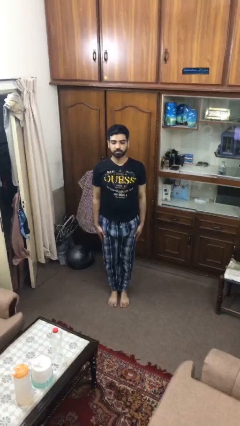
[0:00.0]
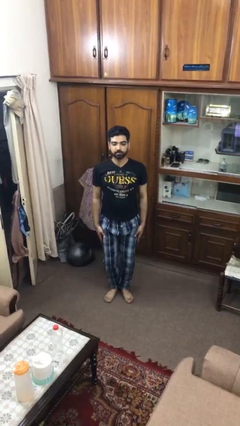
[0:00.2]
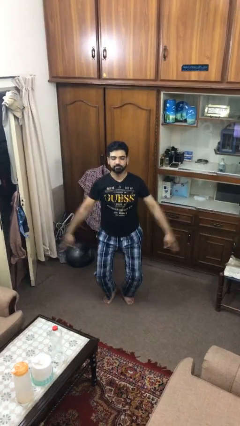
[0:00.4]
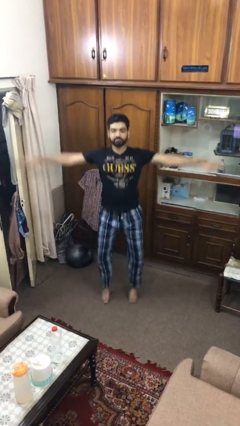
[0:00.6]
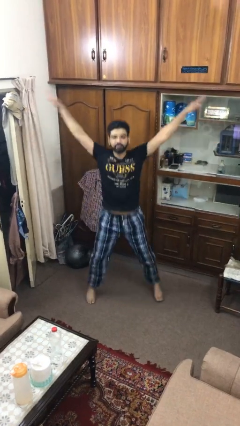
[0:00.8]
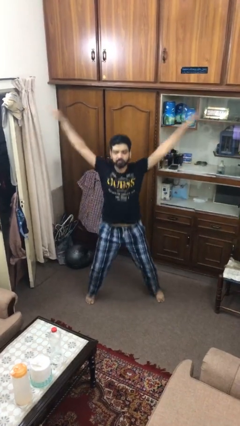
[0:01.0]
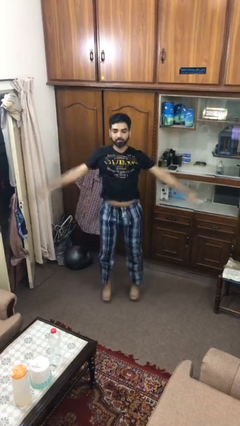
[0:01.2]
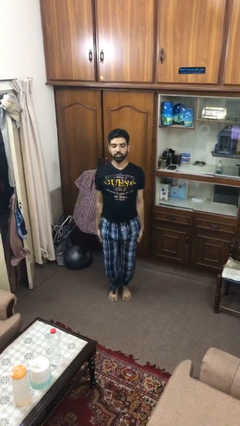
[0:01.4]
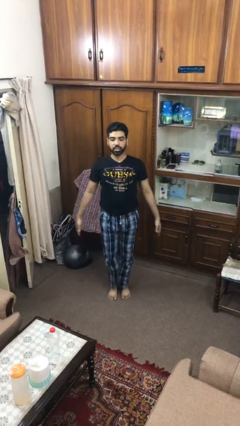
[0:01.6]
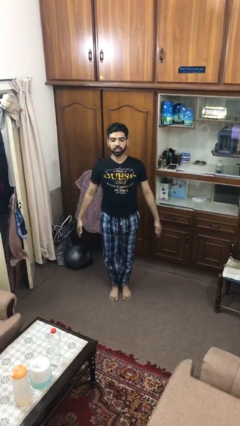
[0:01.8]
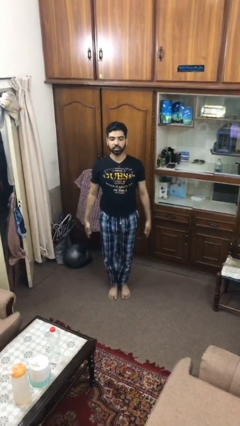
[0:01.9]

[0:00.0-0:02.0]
person exercises with jumping jacks

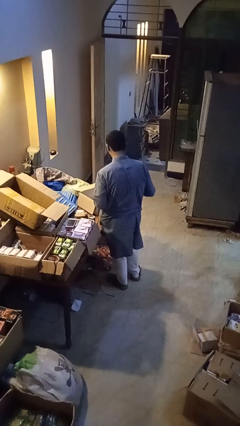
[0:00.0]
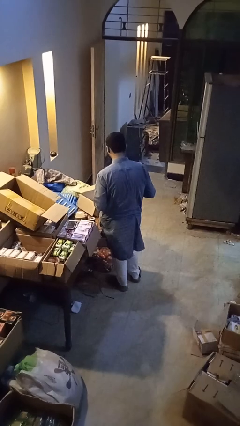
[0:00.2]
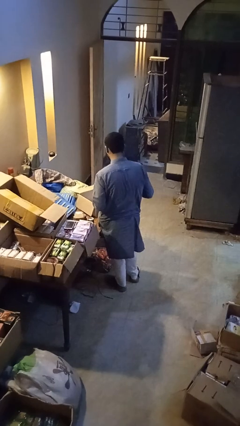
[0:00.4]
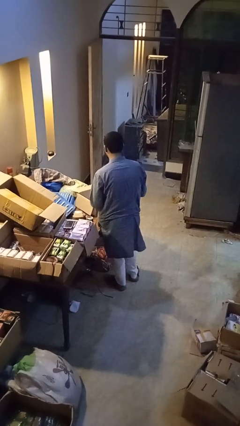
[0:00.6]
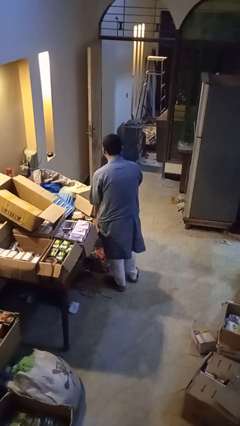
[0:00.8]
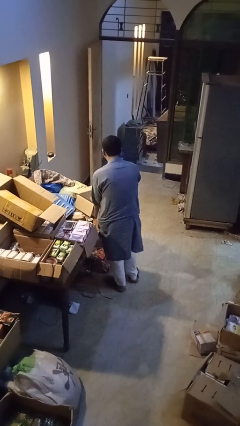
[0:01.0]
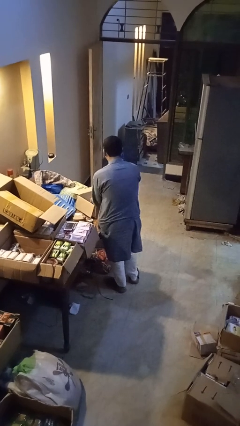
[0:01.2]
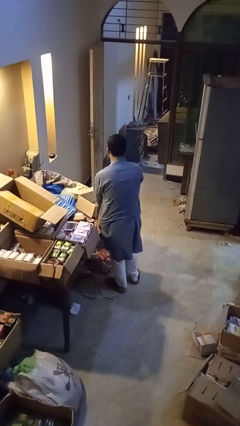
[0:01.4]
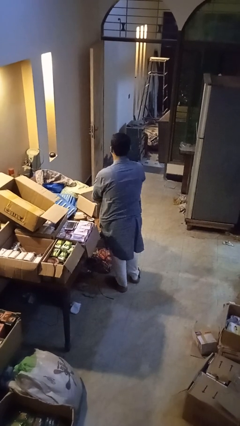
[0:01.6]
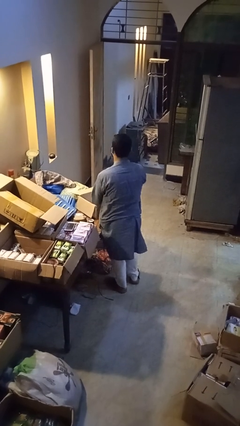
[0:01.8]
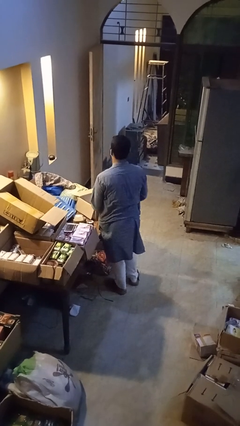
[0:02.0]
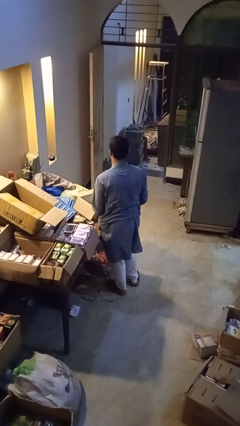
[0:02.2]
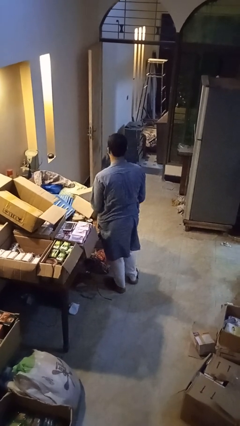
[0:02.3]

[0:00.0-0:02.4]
person puts object into box

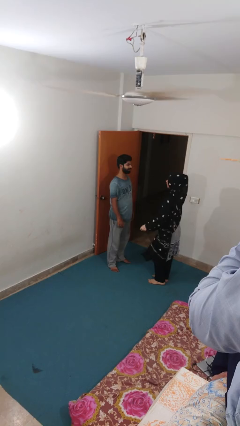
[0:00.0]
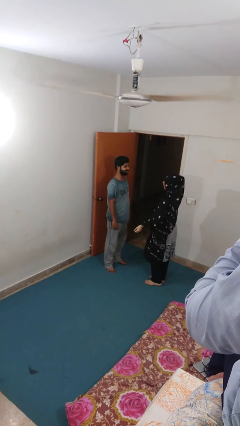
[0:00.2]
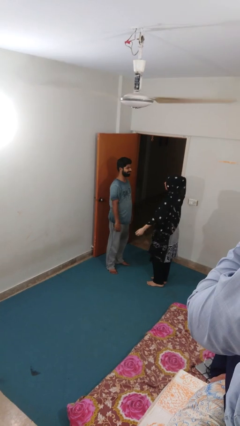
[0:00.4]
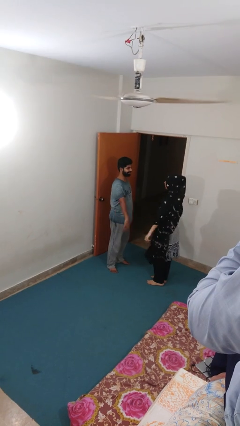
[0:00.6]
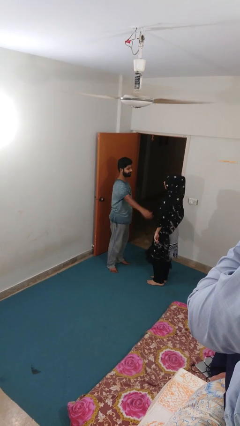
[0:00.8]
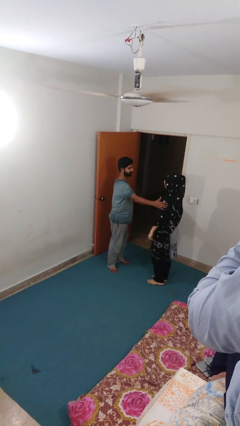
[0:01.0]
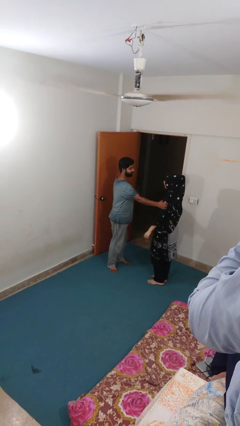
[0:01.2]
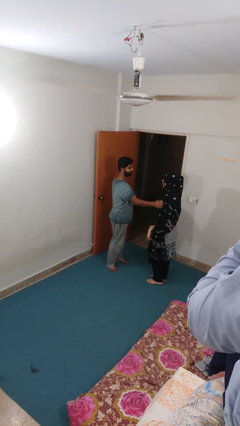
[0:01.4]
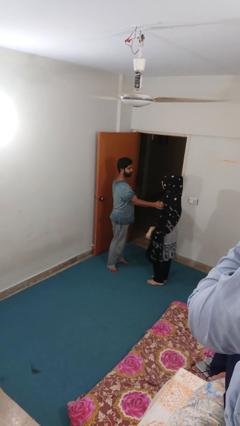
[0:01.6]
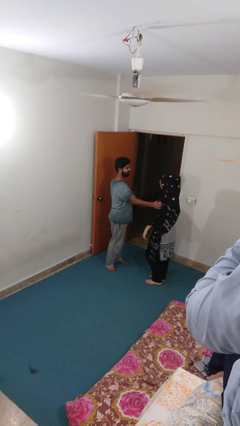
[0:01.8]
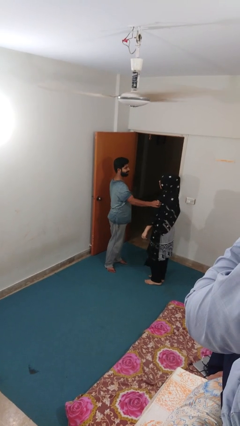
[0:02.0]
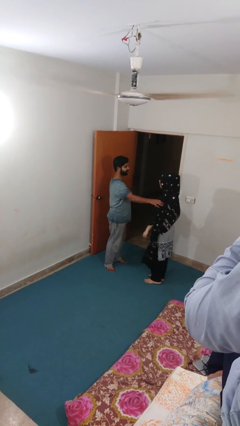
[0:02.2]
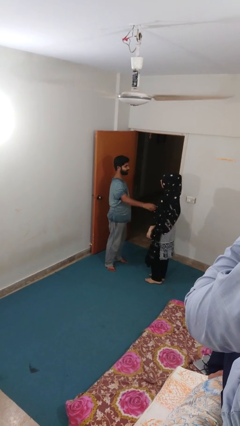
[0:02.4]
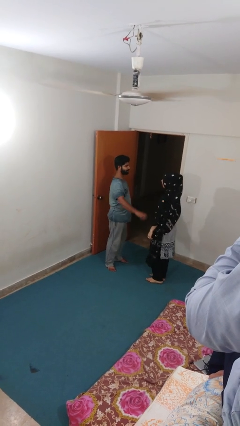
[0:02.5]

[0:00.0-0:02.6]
person grabs person by bicep

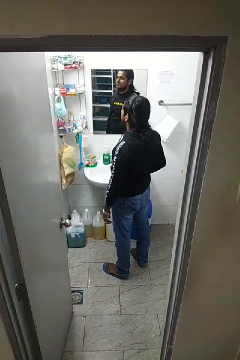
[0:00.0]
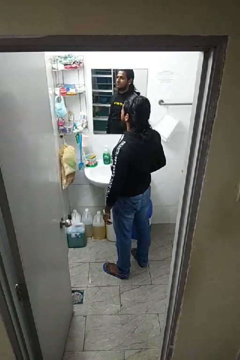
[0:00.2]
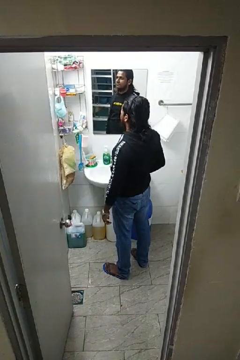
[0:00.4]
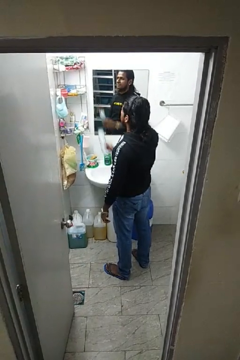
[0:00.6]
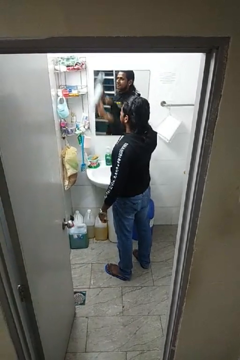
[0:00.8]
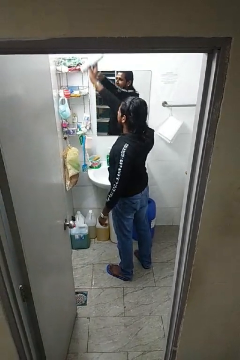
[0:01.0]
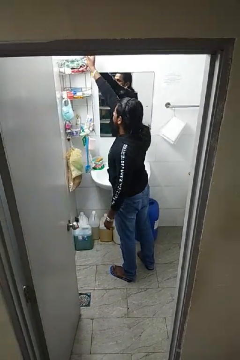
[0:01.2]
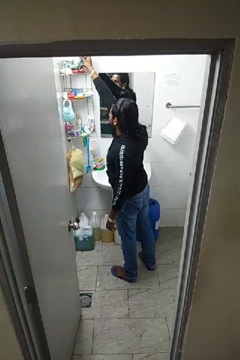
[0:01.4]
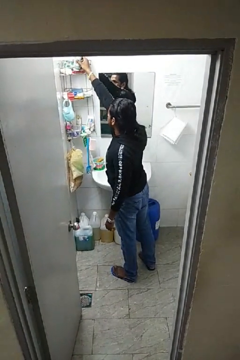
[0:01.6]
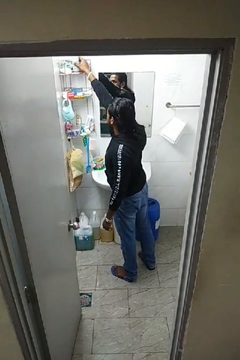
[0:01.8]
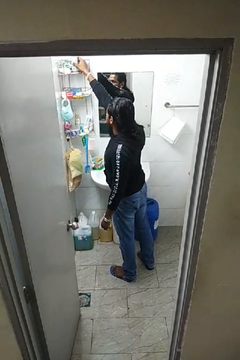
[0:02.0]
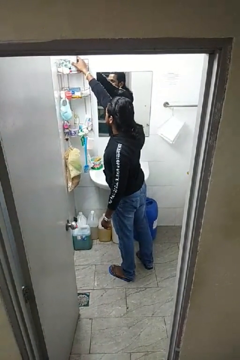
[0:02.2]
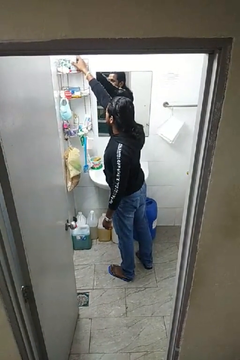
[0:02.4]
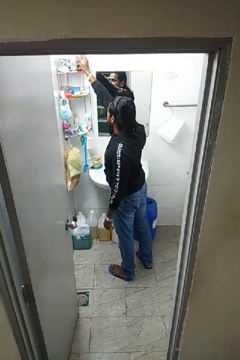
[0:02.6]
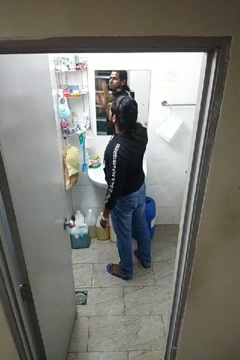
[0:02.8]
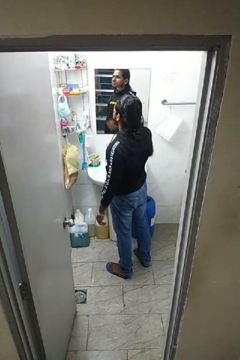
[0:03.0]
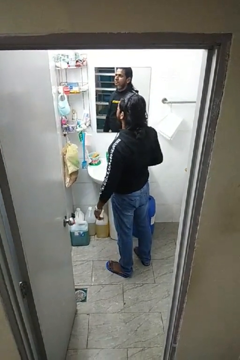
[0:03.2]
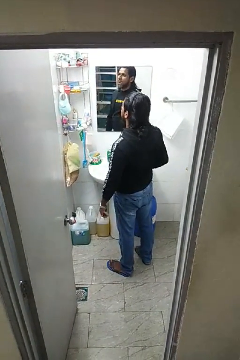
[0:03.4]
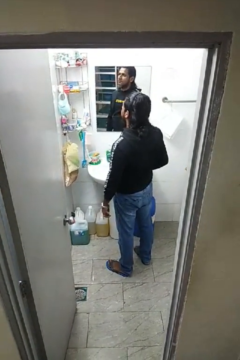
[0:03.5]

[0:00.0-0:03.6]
person puts down object on countertop

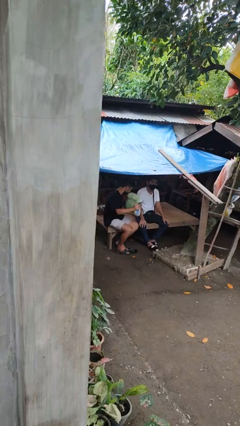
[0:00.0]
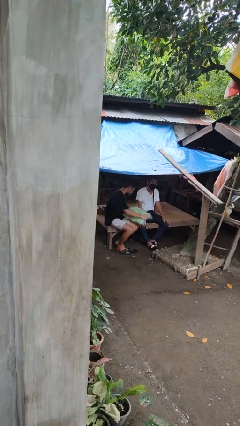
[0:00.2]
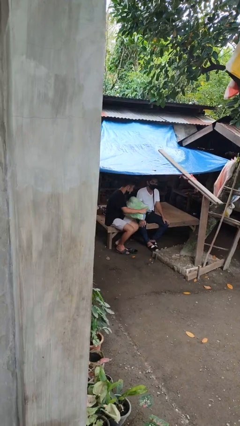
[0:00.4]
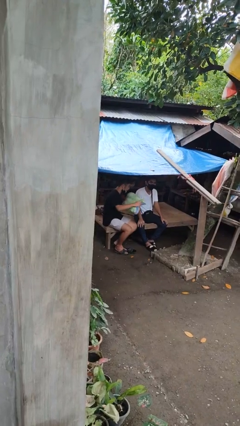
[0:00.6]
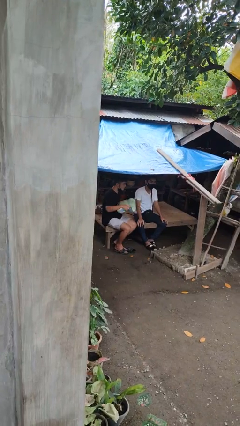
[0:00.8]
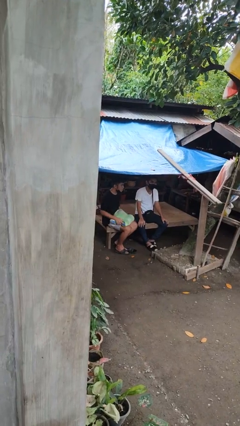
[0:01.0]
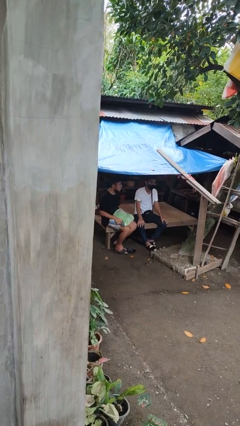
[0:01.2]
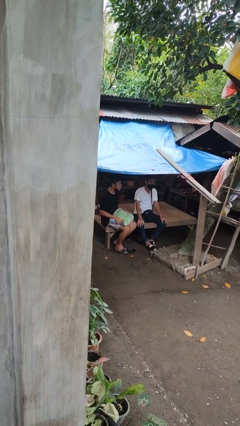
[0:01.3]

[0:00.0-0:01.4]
person hits person with pillow

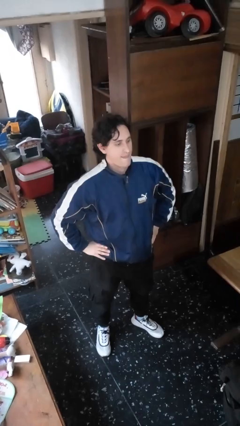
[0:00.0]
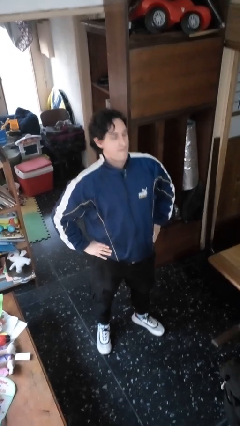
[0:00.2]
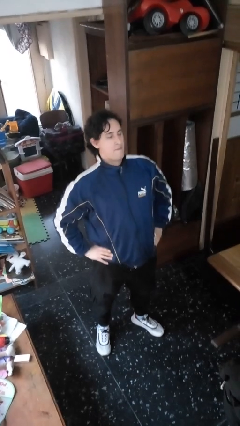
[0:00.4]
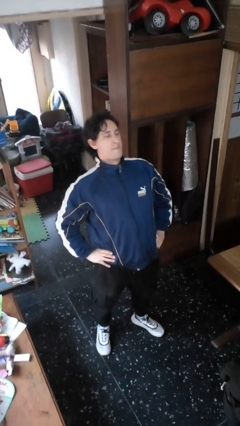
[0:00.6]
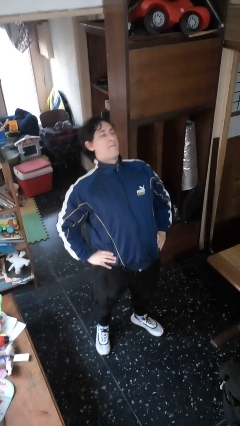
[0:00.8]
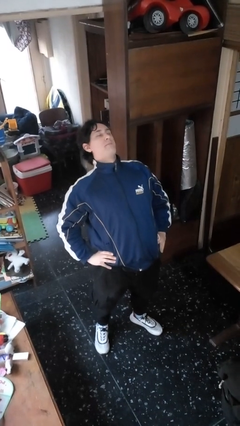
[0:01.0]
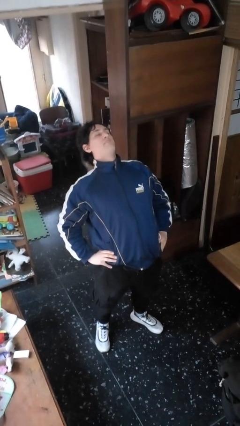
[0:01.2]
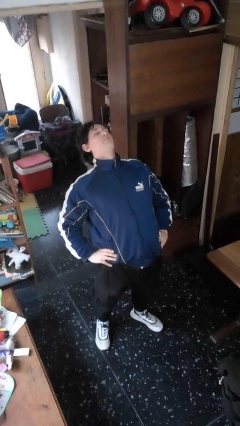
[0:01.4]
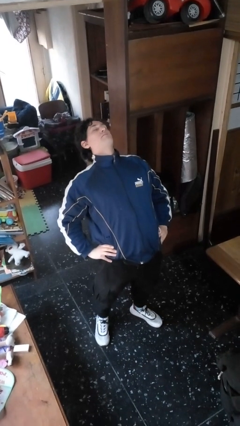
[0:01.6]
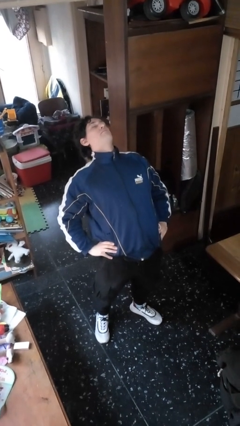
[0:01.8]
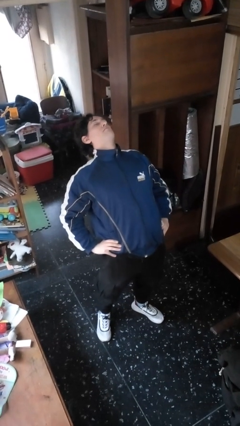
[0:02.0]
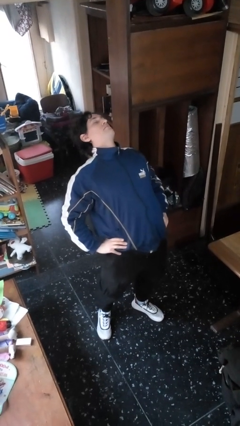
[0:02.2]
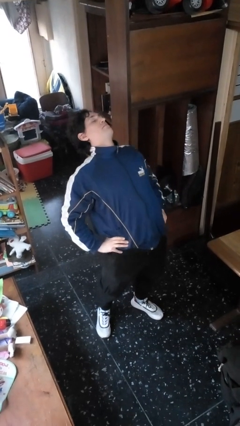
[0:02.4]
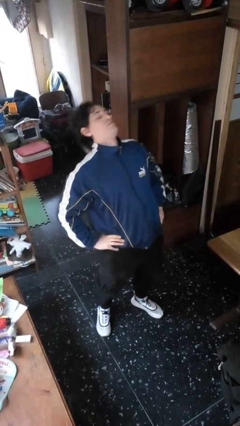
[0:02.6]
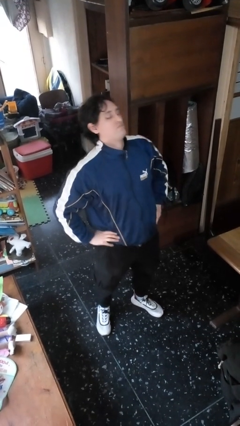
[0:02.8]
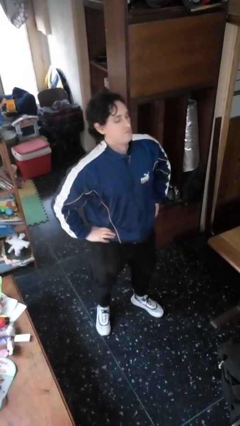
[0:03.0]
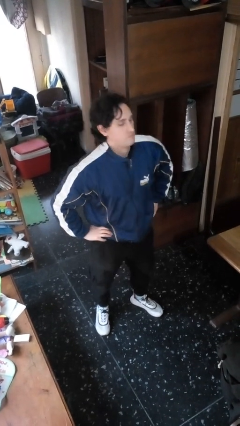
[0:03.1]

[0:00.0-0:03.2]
person stretches back

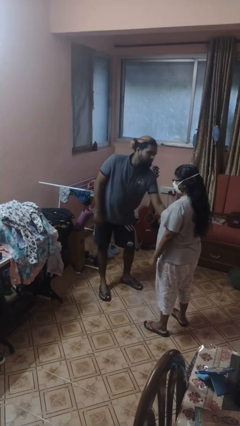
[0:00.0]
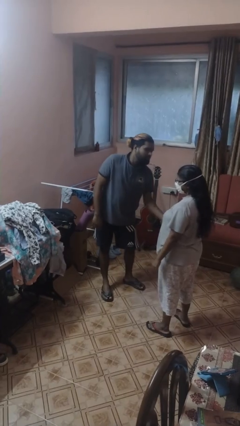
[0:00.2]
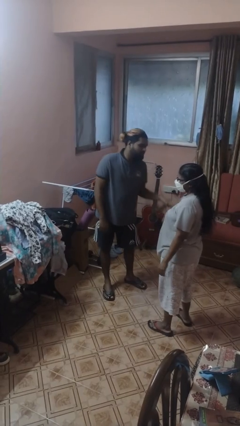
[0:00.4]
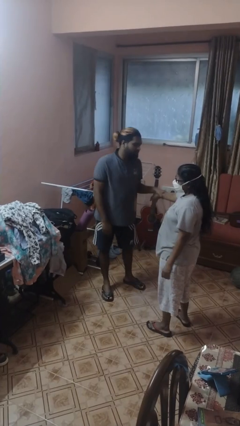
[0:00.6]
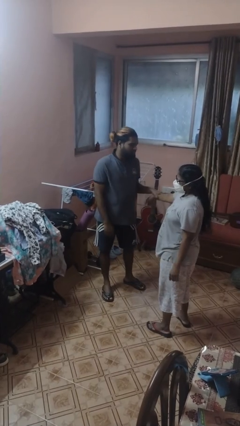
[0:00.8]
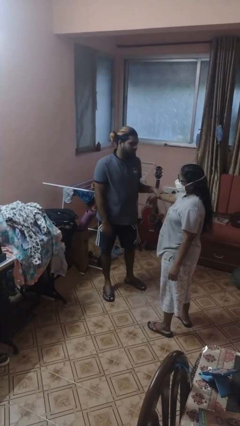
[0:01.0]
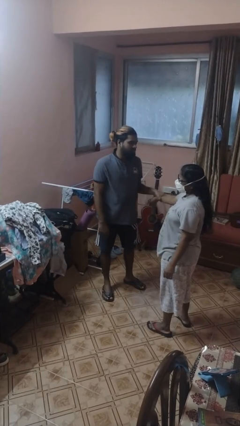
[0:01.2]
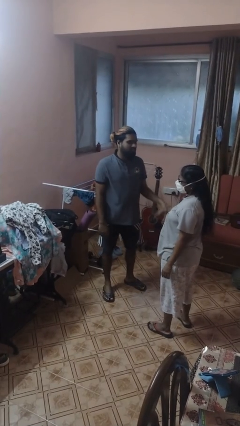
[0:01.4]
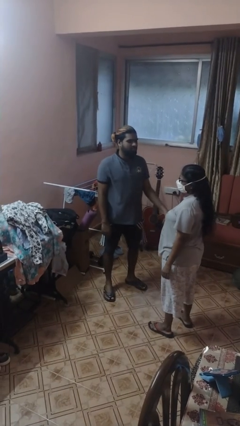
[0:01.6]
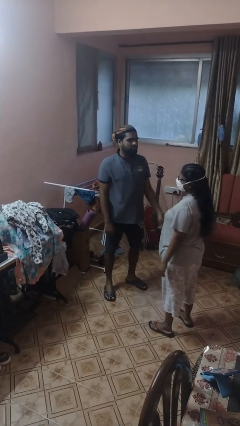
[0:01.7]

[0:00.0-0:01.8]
person grabs person by forearm

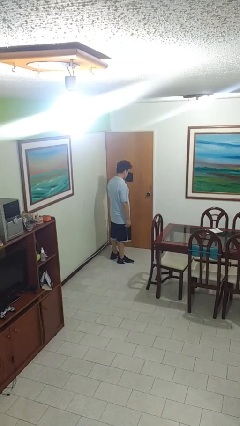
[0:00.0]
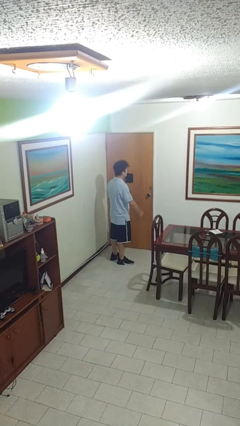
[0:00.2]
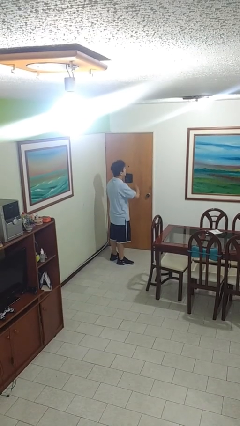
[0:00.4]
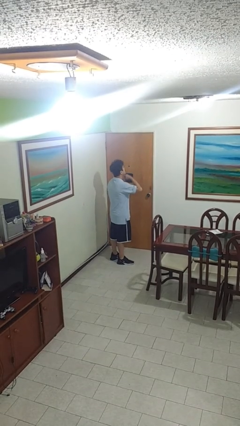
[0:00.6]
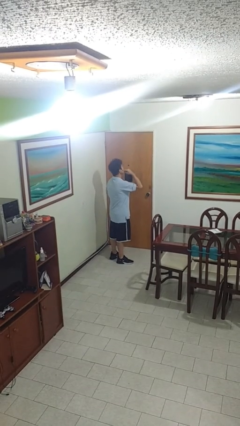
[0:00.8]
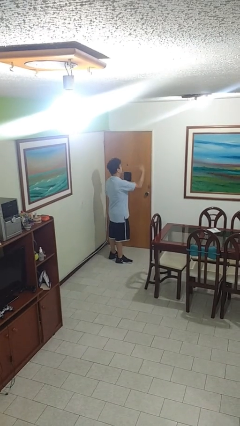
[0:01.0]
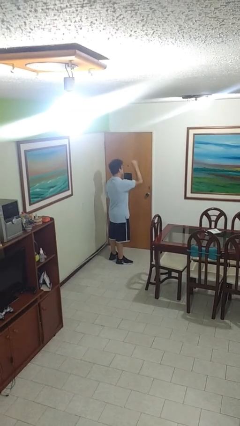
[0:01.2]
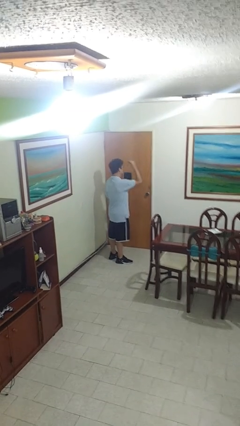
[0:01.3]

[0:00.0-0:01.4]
person gestures cut
